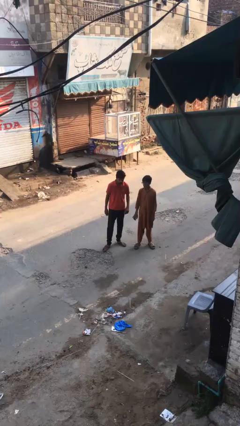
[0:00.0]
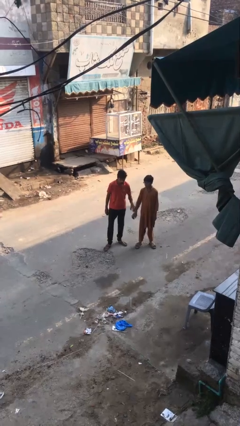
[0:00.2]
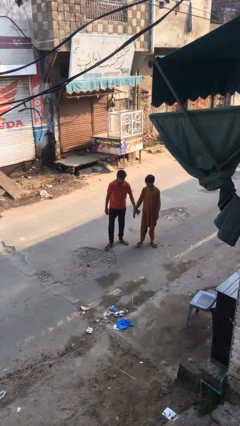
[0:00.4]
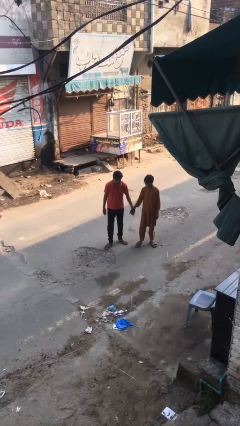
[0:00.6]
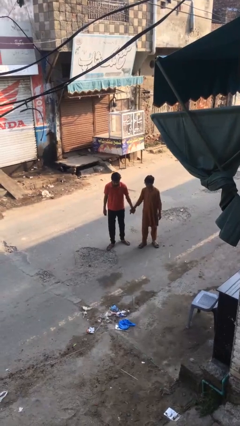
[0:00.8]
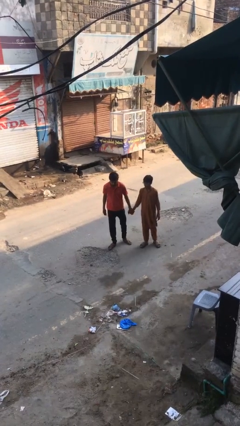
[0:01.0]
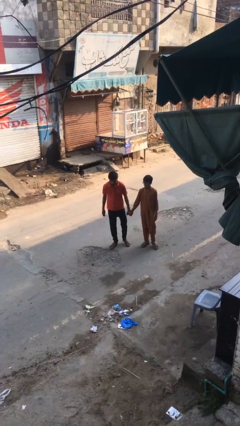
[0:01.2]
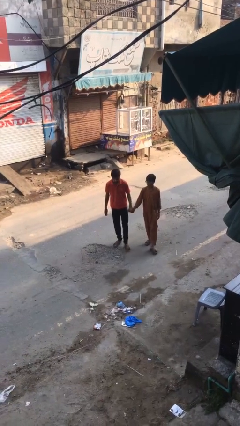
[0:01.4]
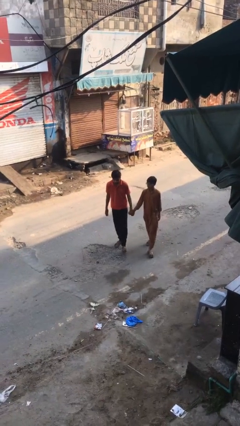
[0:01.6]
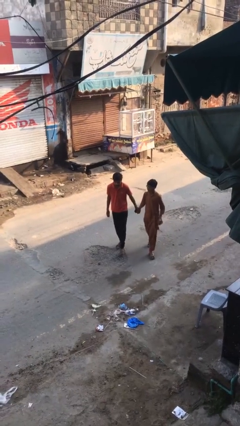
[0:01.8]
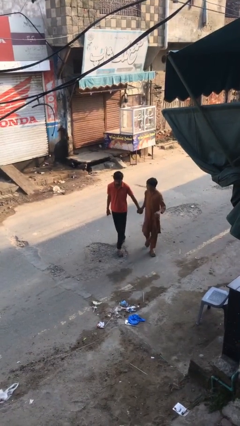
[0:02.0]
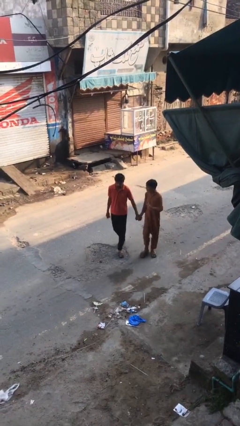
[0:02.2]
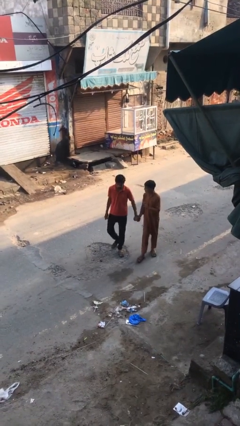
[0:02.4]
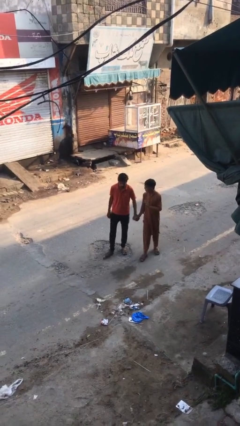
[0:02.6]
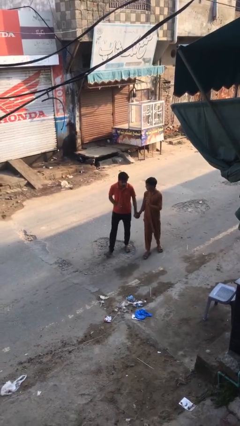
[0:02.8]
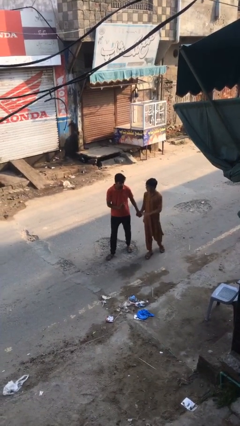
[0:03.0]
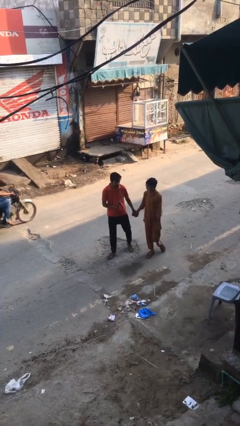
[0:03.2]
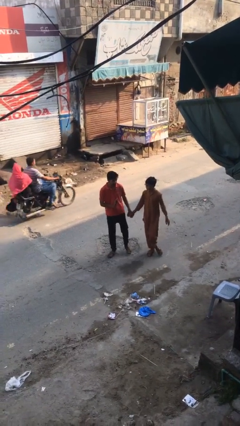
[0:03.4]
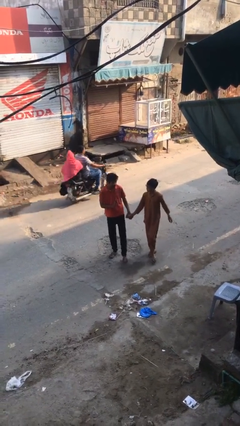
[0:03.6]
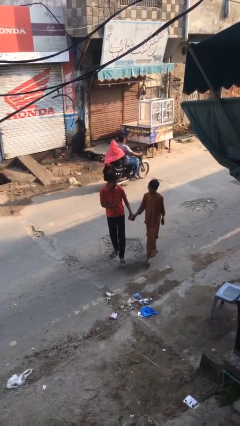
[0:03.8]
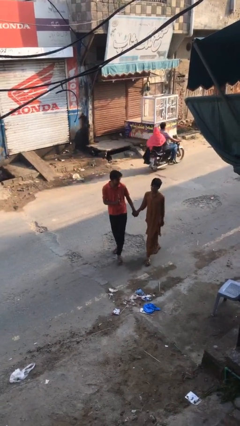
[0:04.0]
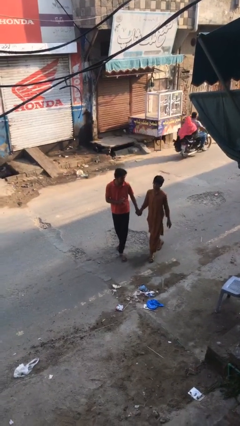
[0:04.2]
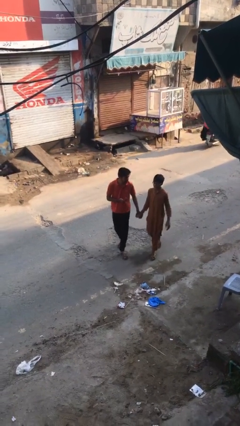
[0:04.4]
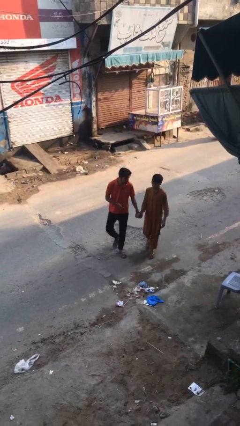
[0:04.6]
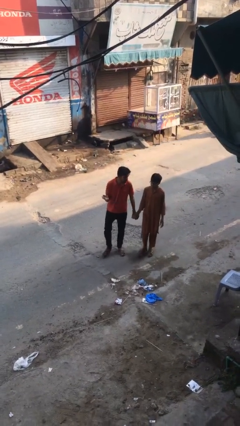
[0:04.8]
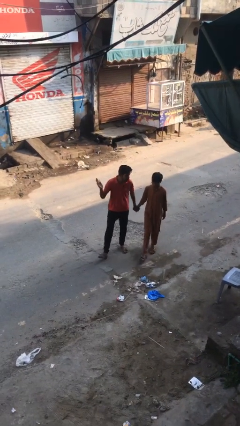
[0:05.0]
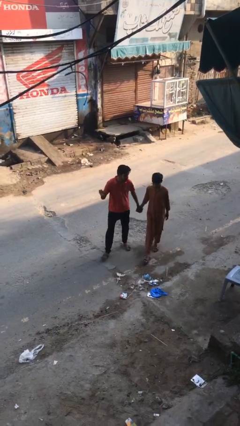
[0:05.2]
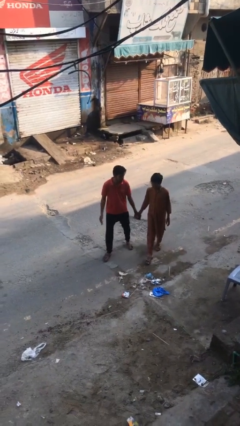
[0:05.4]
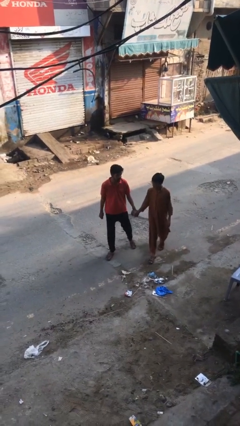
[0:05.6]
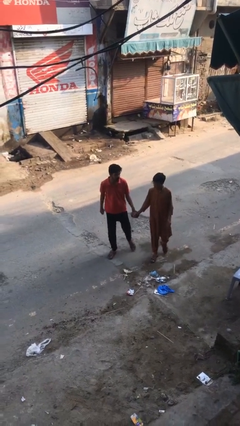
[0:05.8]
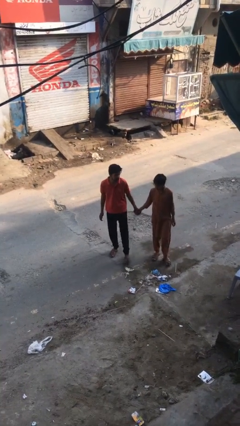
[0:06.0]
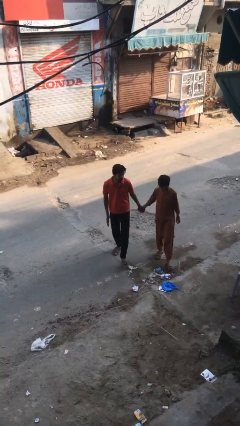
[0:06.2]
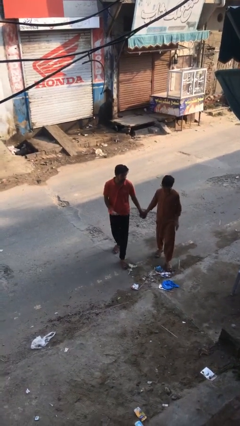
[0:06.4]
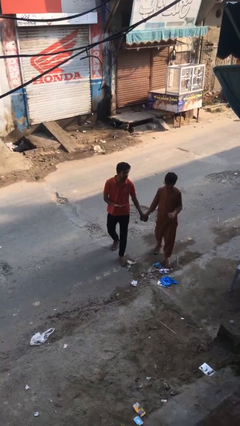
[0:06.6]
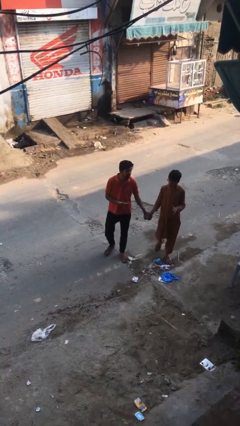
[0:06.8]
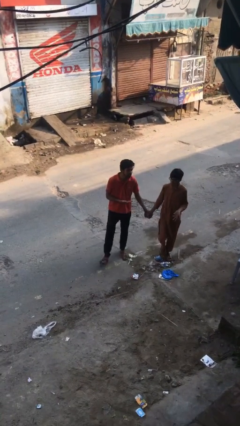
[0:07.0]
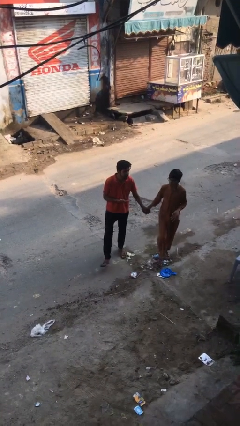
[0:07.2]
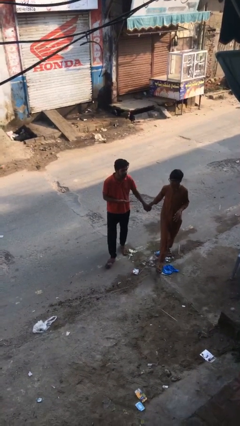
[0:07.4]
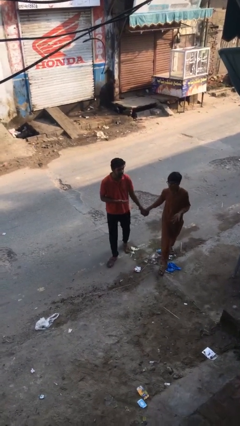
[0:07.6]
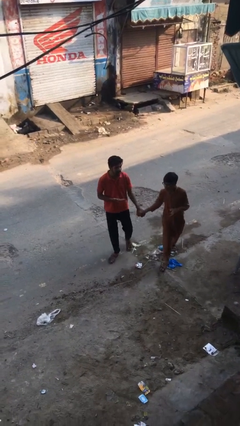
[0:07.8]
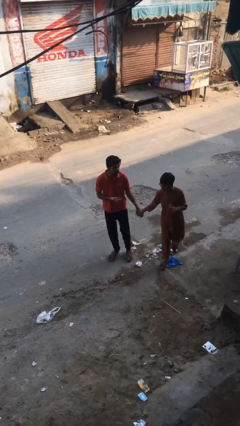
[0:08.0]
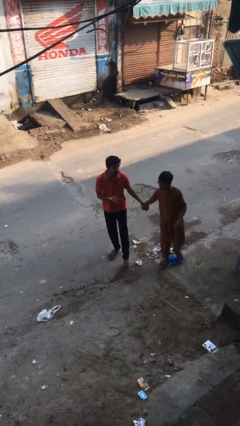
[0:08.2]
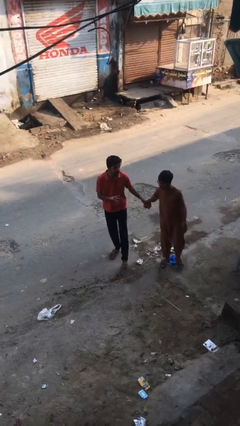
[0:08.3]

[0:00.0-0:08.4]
person holds hand

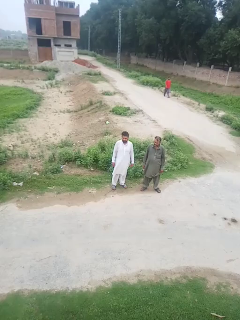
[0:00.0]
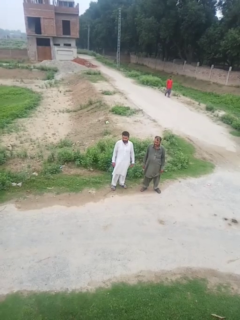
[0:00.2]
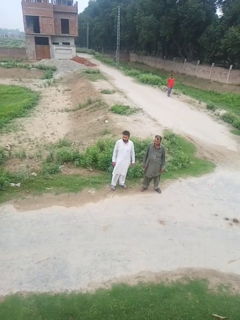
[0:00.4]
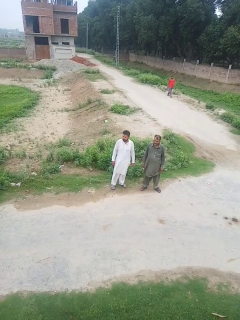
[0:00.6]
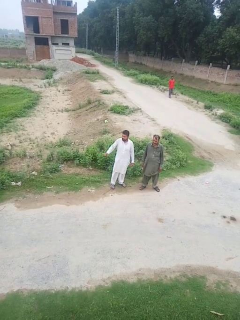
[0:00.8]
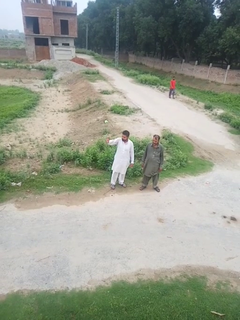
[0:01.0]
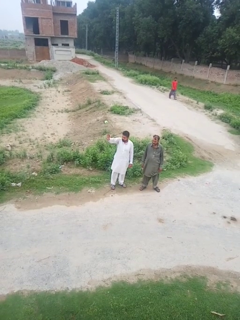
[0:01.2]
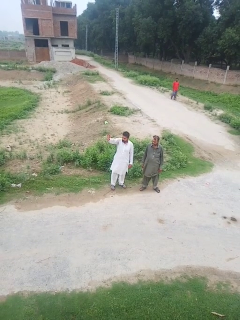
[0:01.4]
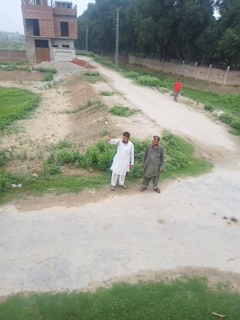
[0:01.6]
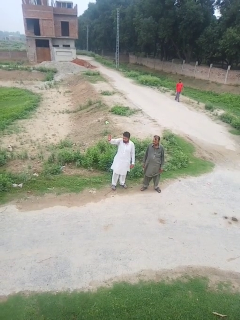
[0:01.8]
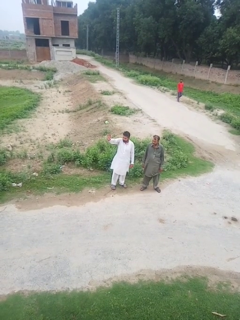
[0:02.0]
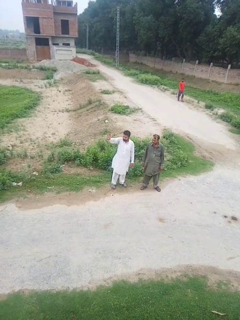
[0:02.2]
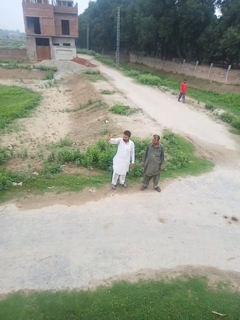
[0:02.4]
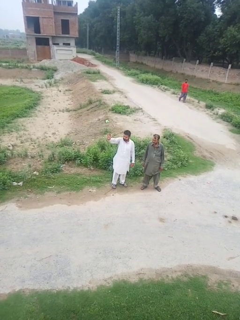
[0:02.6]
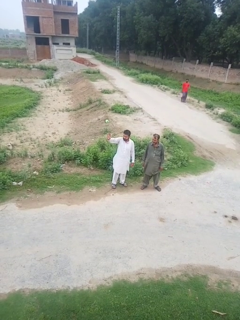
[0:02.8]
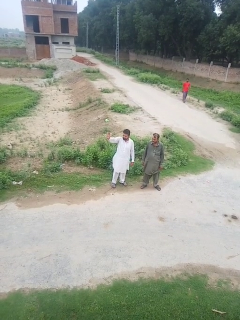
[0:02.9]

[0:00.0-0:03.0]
person waves at person

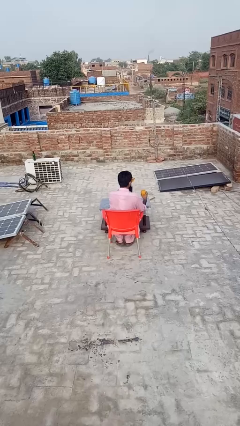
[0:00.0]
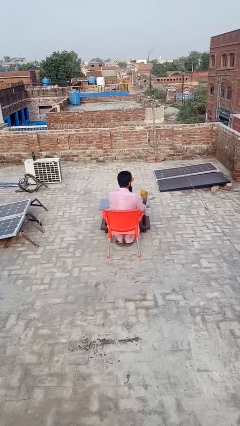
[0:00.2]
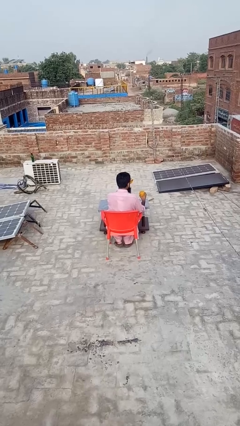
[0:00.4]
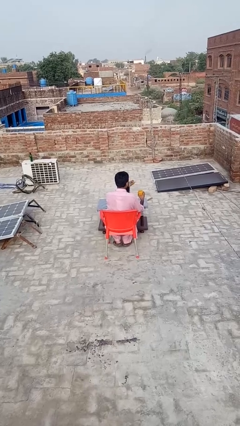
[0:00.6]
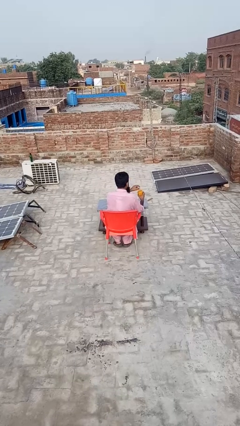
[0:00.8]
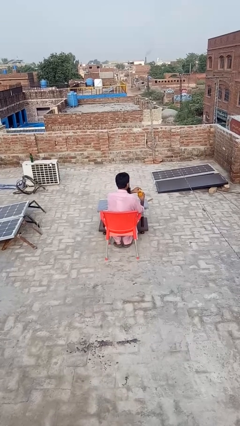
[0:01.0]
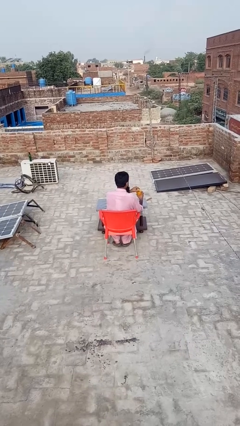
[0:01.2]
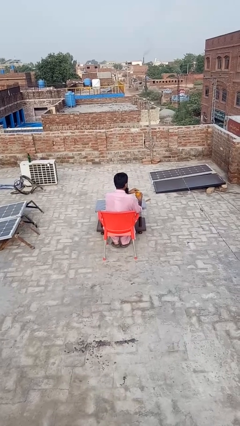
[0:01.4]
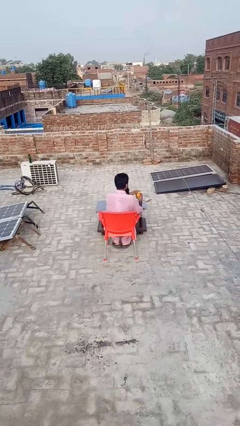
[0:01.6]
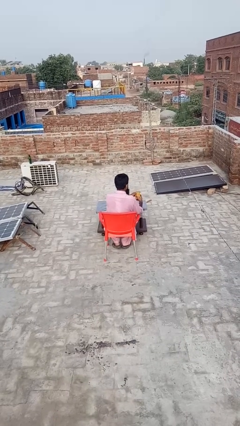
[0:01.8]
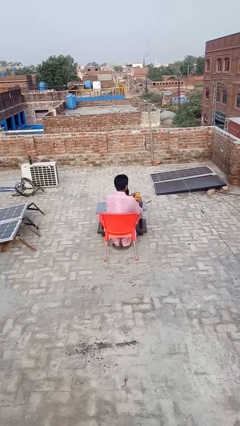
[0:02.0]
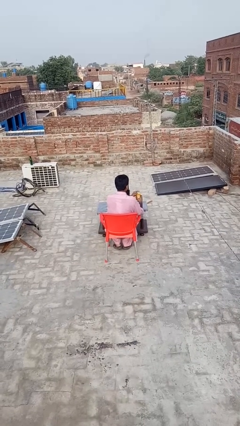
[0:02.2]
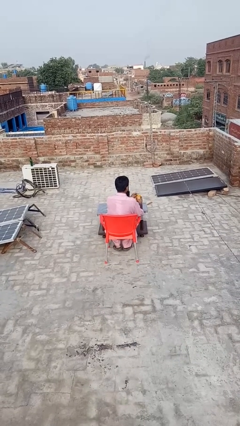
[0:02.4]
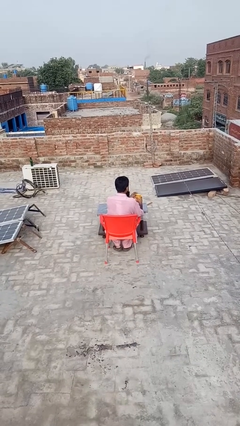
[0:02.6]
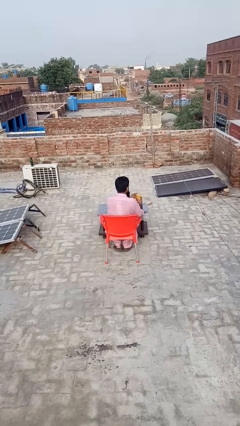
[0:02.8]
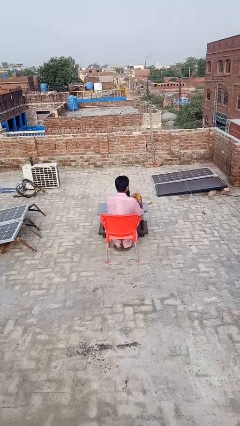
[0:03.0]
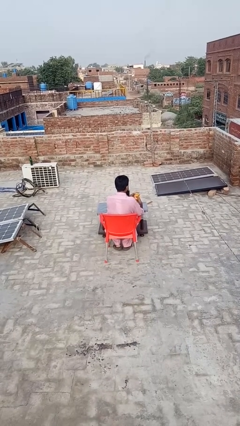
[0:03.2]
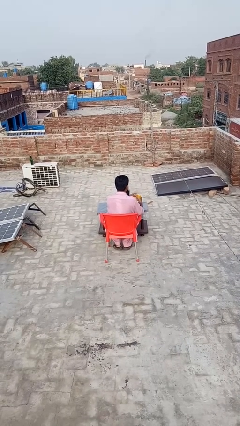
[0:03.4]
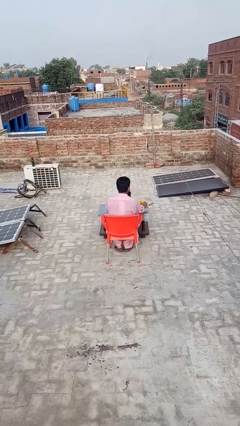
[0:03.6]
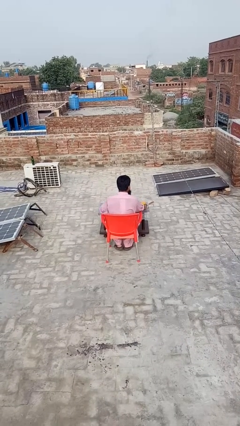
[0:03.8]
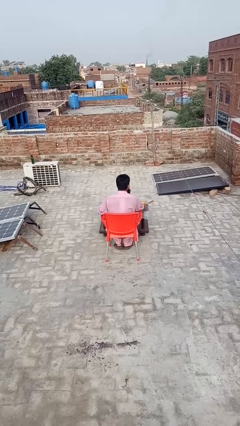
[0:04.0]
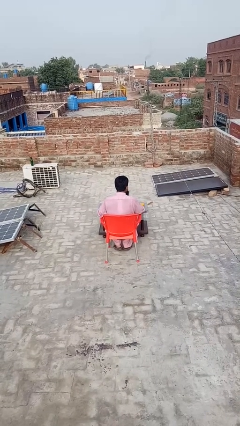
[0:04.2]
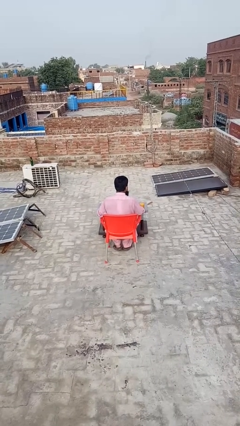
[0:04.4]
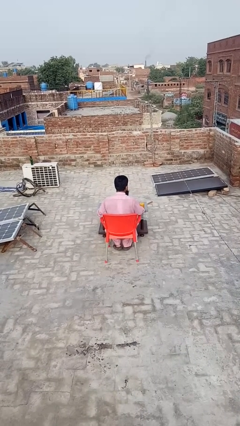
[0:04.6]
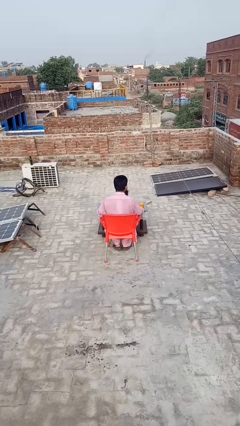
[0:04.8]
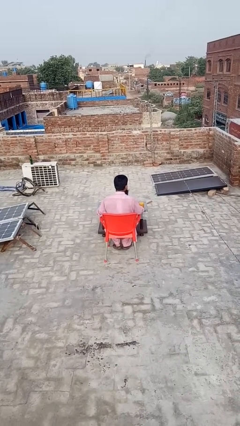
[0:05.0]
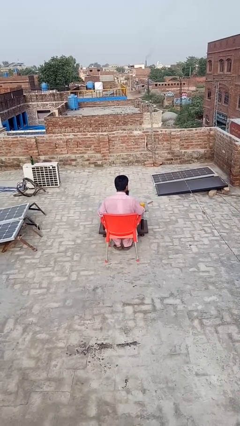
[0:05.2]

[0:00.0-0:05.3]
person closes jar

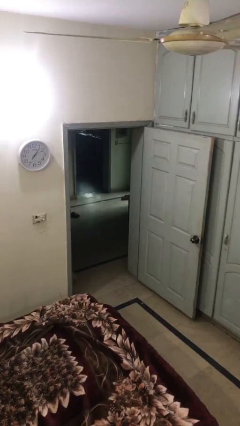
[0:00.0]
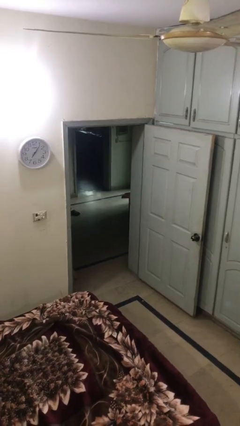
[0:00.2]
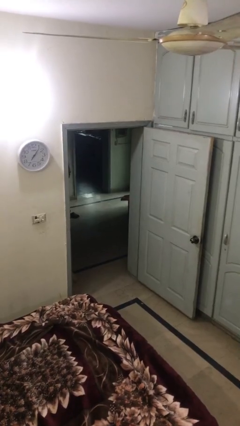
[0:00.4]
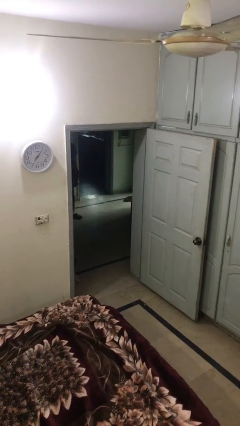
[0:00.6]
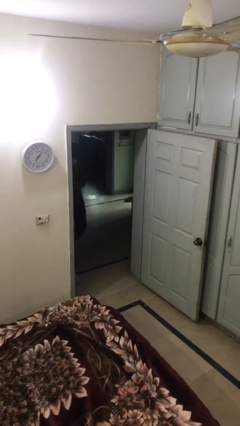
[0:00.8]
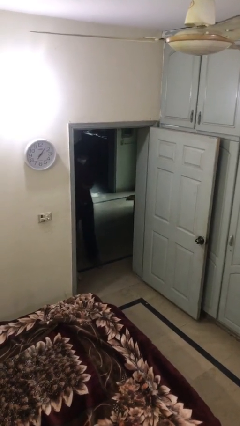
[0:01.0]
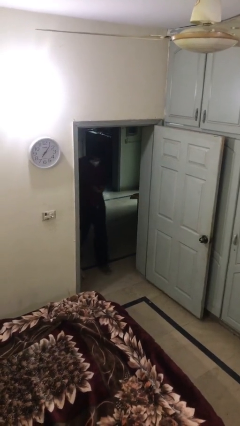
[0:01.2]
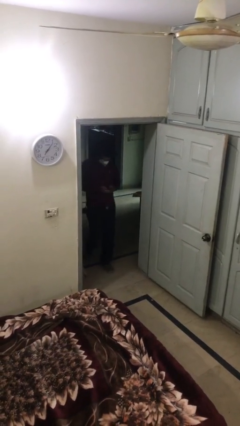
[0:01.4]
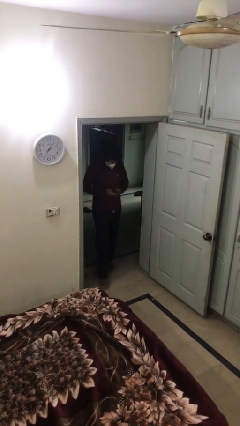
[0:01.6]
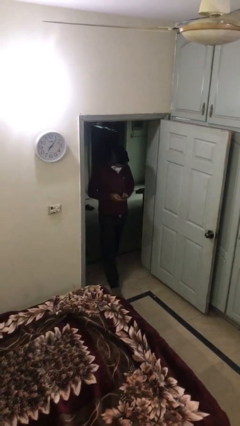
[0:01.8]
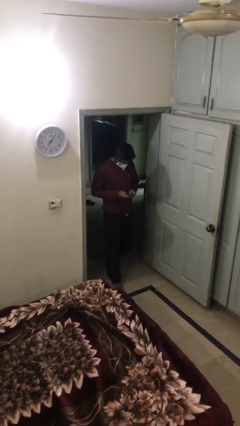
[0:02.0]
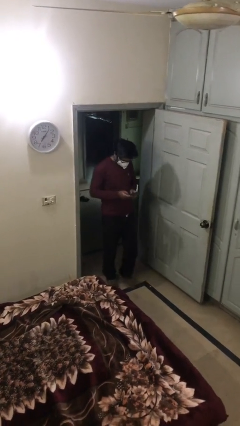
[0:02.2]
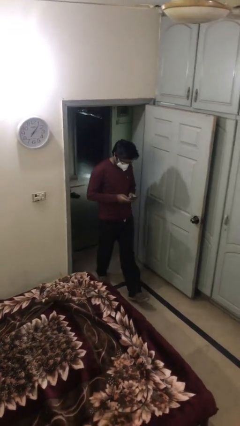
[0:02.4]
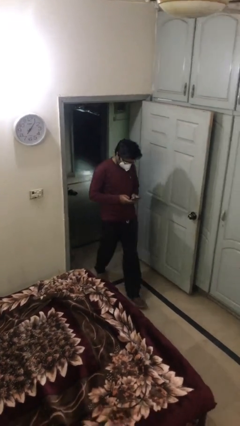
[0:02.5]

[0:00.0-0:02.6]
person enters scene through structure
